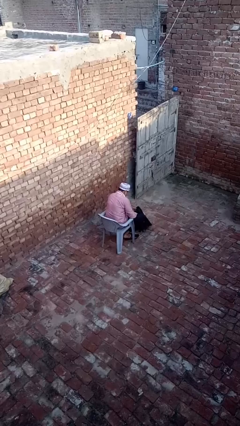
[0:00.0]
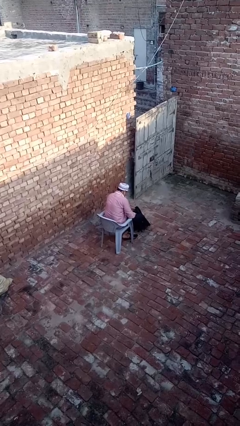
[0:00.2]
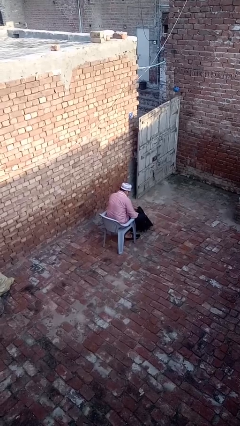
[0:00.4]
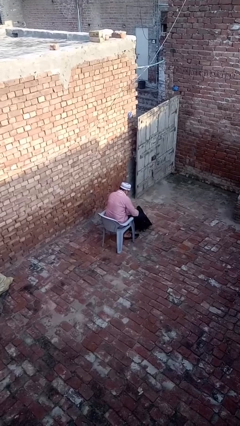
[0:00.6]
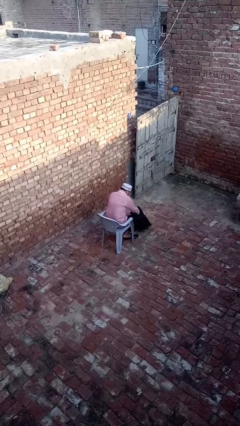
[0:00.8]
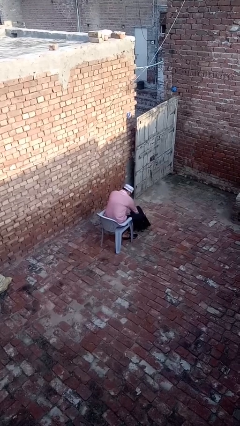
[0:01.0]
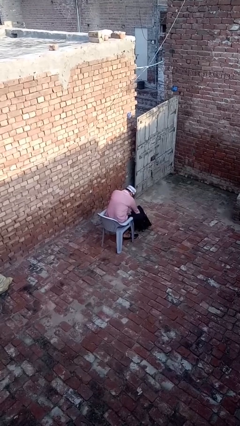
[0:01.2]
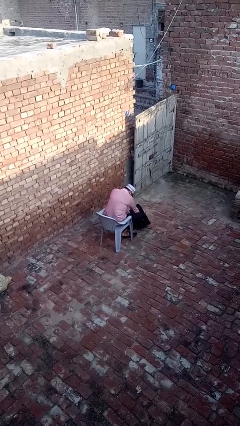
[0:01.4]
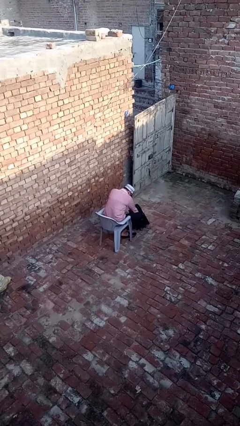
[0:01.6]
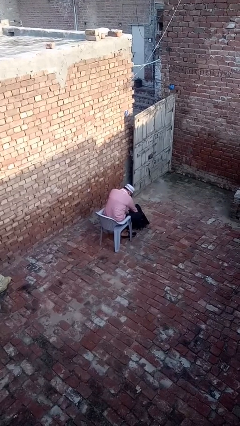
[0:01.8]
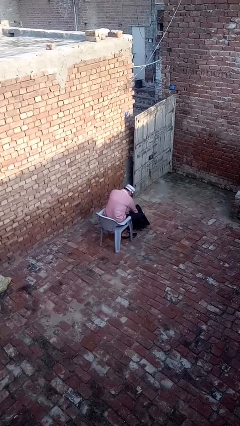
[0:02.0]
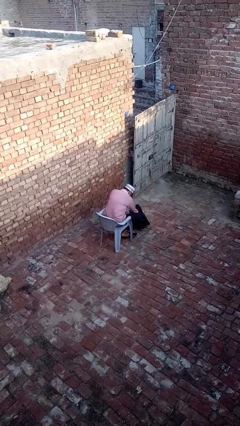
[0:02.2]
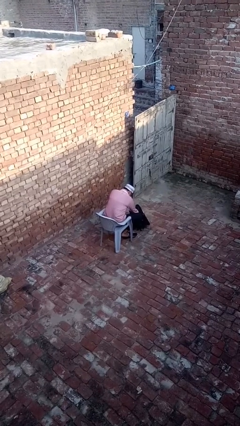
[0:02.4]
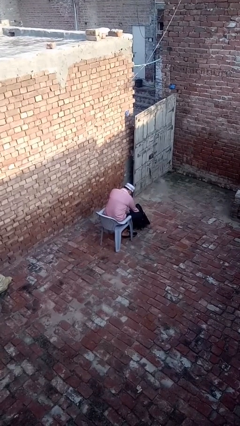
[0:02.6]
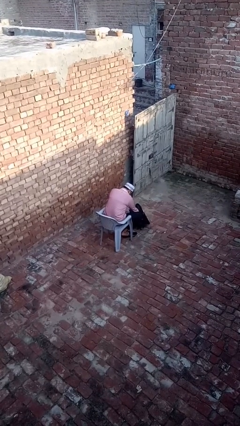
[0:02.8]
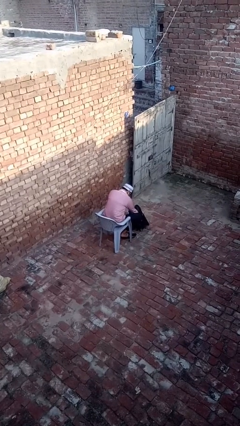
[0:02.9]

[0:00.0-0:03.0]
person searches in backpack

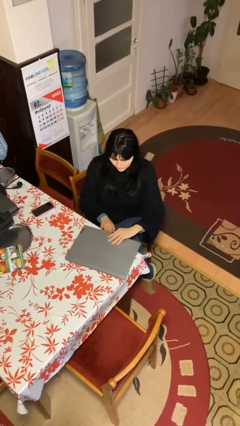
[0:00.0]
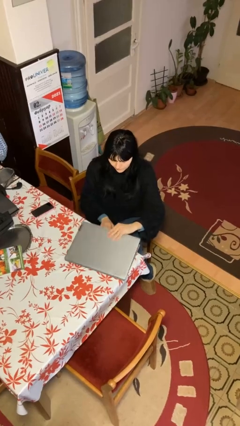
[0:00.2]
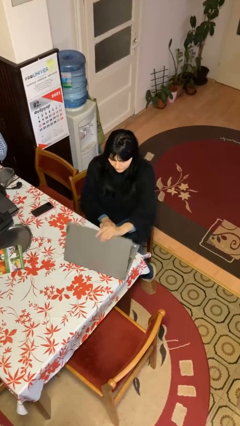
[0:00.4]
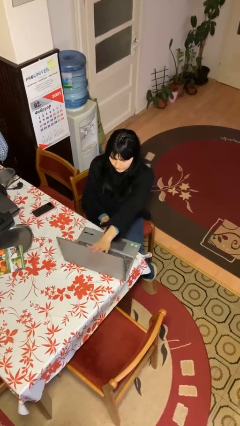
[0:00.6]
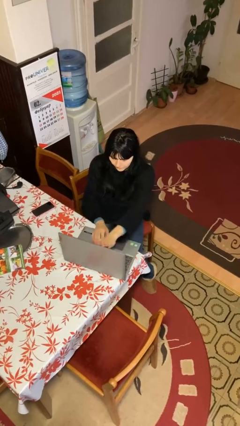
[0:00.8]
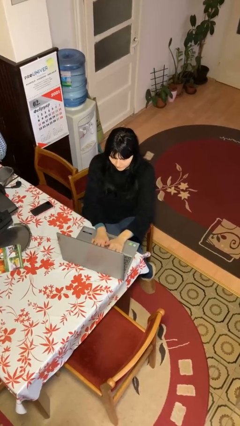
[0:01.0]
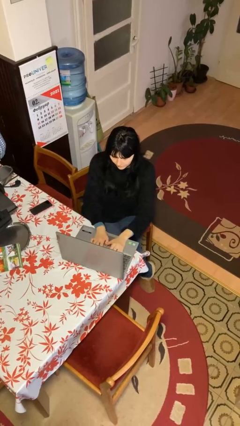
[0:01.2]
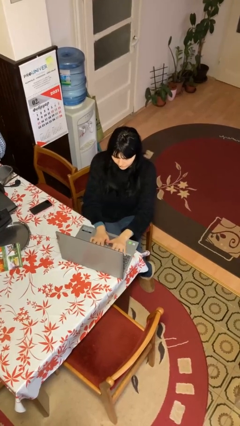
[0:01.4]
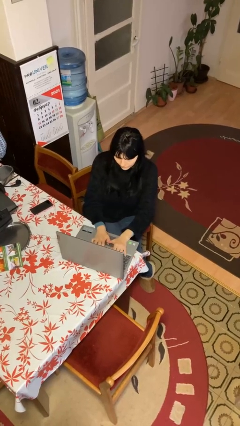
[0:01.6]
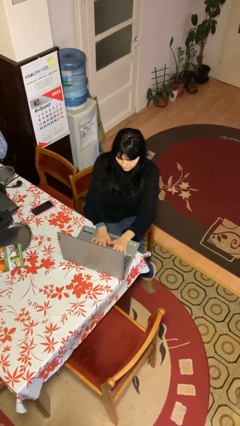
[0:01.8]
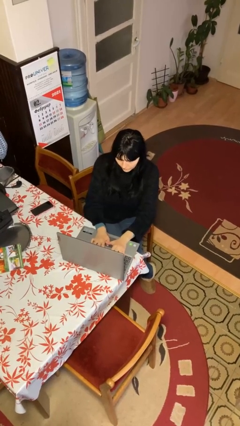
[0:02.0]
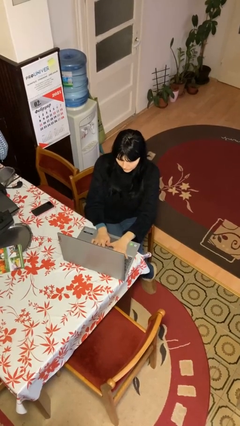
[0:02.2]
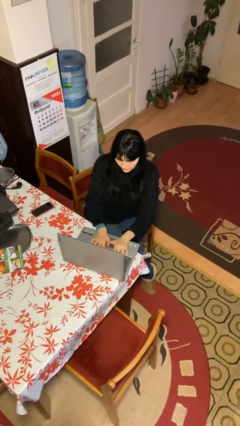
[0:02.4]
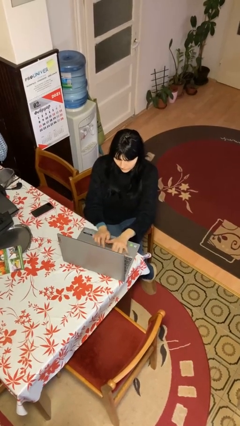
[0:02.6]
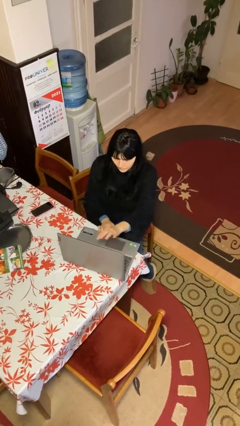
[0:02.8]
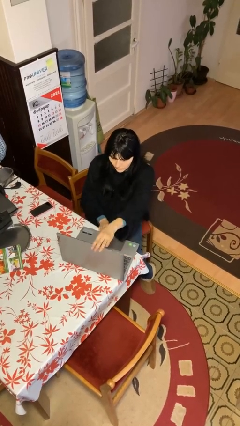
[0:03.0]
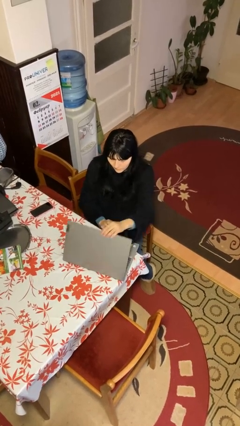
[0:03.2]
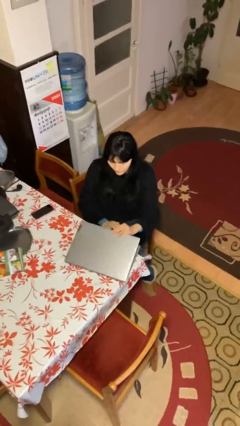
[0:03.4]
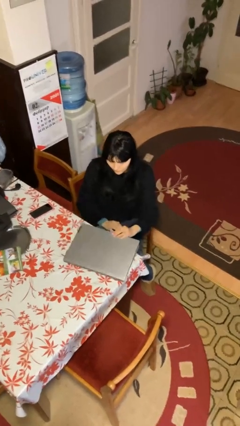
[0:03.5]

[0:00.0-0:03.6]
person interacts with laptop

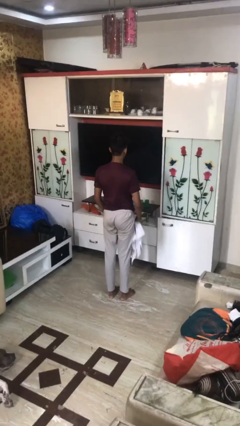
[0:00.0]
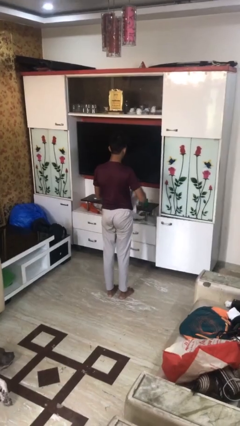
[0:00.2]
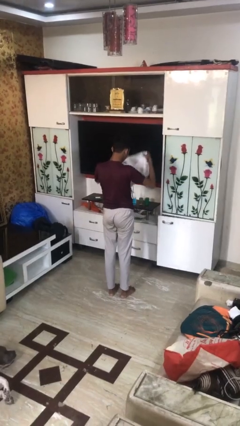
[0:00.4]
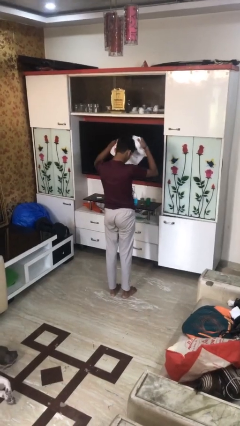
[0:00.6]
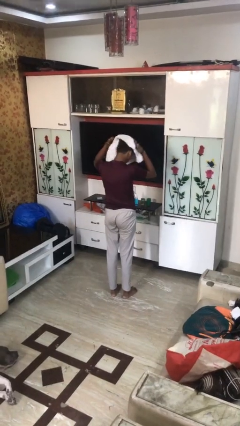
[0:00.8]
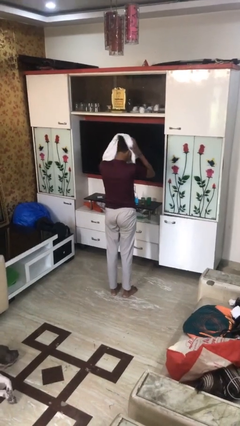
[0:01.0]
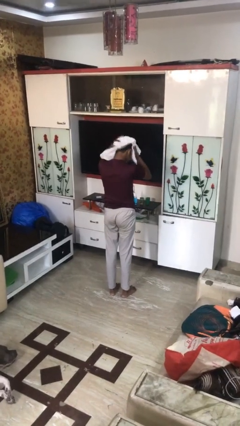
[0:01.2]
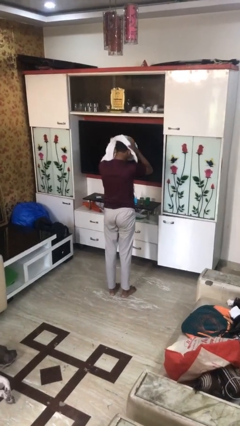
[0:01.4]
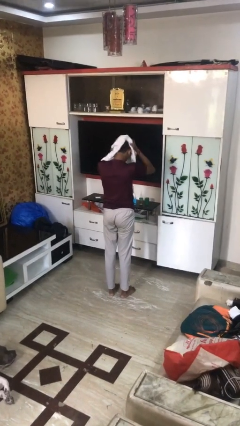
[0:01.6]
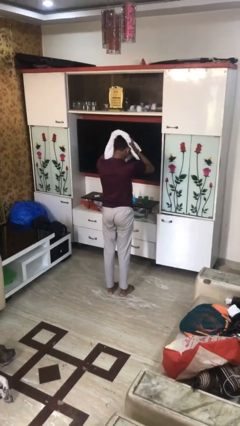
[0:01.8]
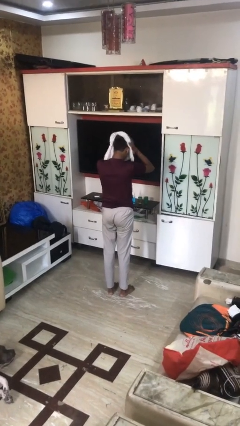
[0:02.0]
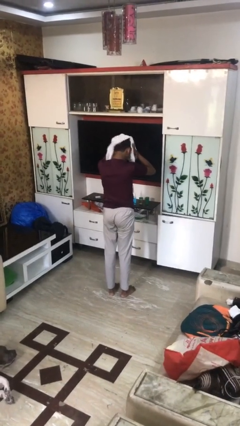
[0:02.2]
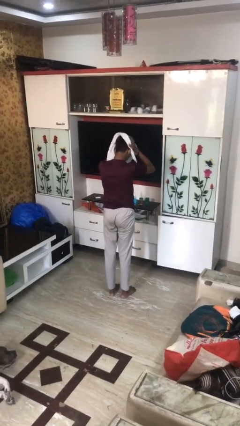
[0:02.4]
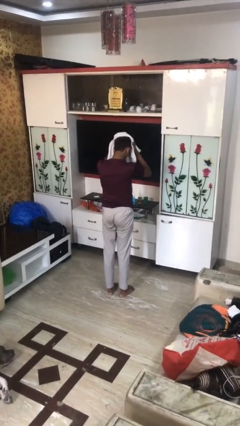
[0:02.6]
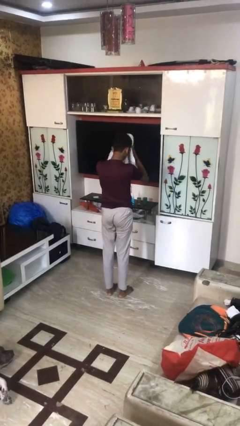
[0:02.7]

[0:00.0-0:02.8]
person dries hair with towel

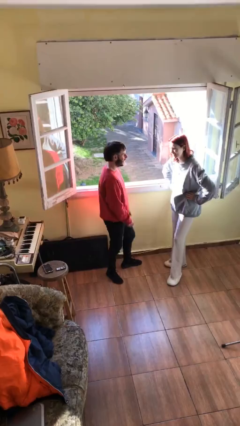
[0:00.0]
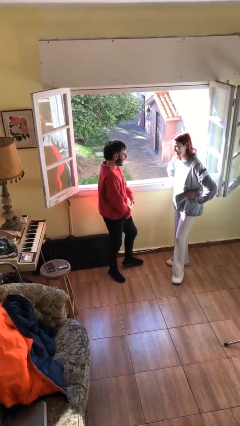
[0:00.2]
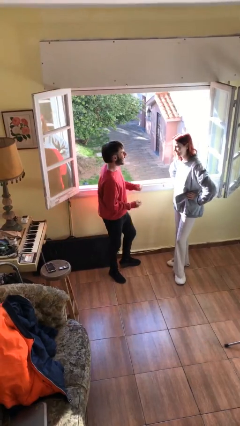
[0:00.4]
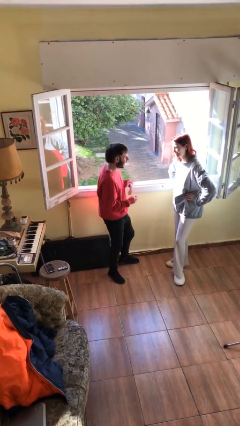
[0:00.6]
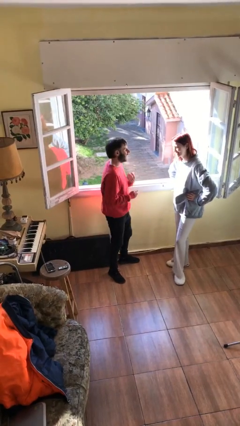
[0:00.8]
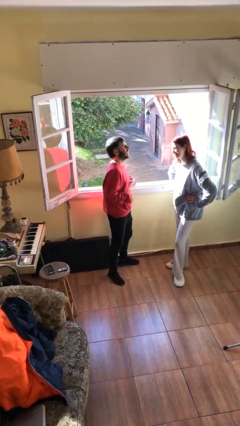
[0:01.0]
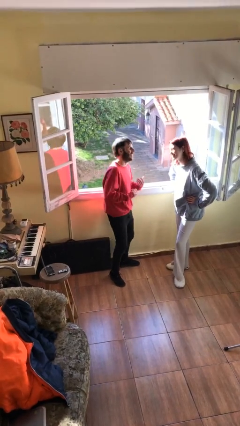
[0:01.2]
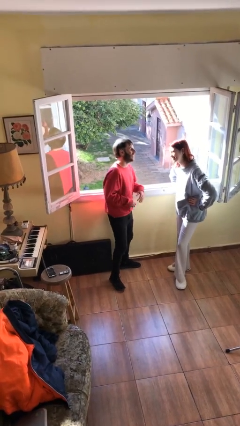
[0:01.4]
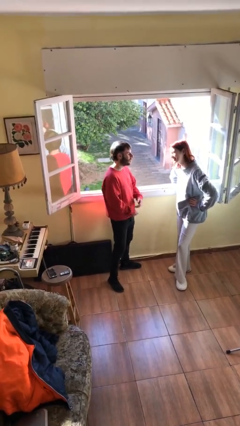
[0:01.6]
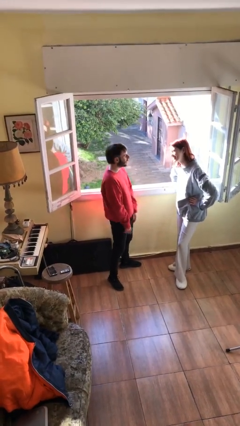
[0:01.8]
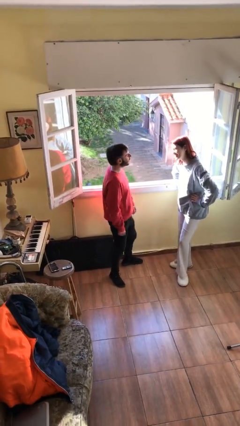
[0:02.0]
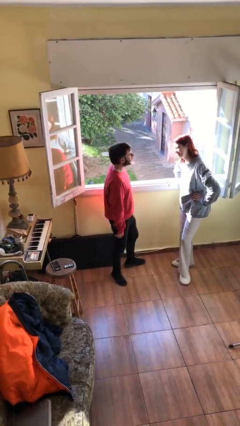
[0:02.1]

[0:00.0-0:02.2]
person laughs with person

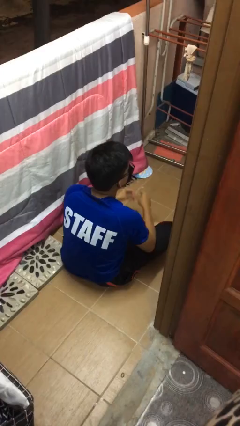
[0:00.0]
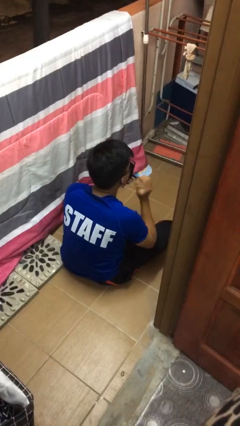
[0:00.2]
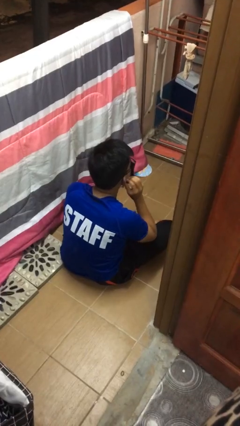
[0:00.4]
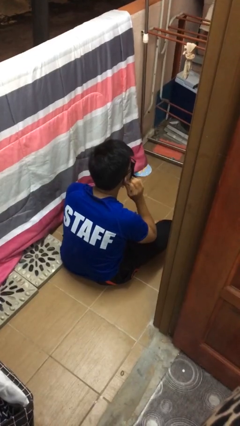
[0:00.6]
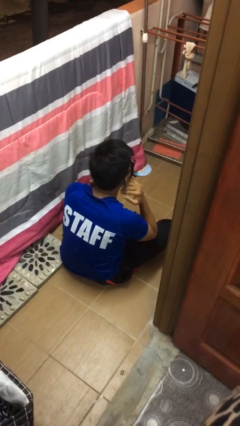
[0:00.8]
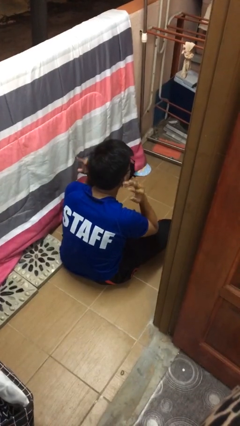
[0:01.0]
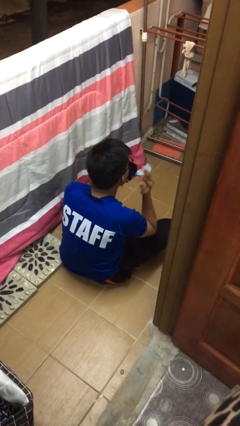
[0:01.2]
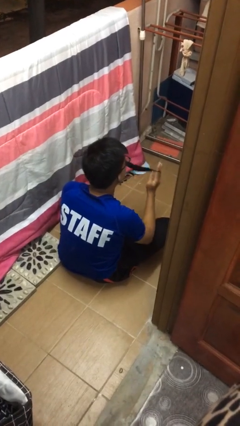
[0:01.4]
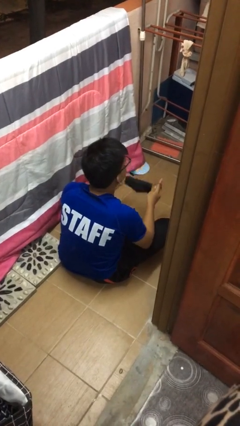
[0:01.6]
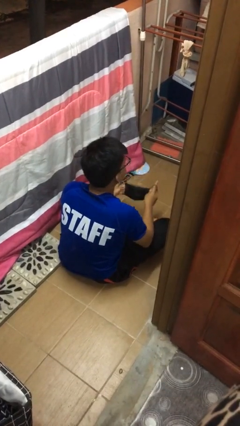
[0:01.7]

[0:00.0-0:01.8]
person takes off facemask

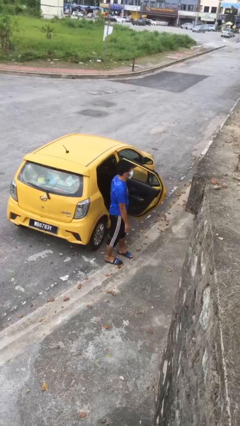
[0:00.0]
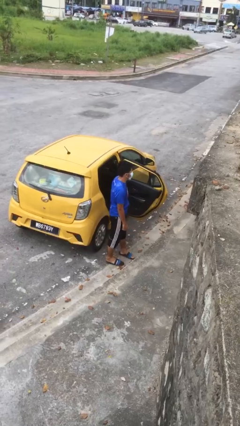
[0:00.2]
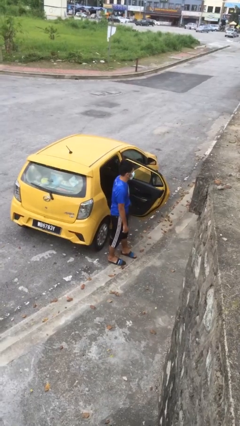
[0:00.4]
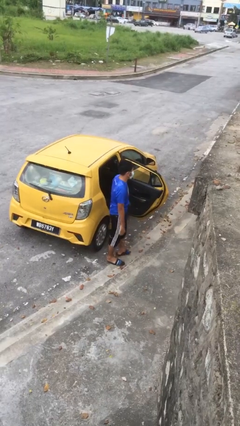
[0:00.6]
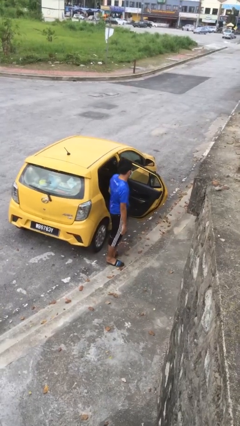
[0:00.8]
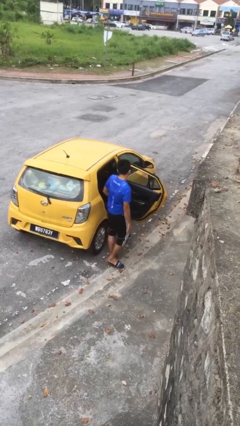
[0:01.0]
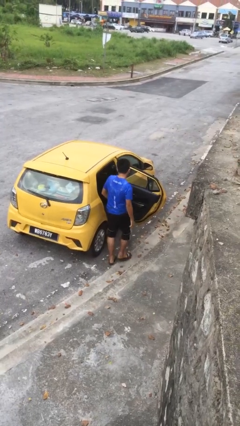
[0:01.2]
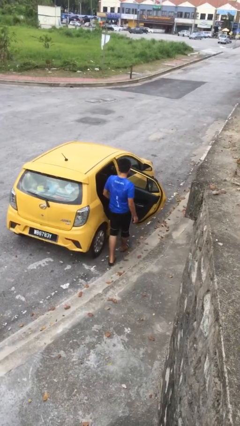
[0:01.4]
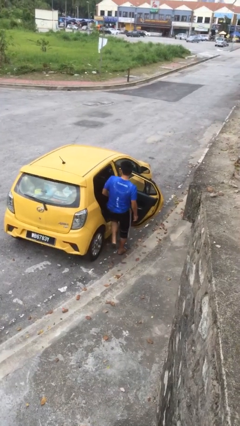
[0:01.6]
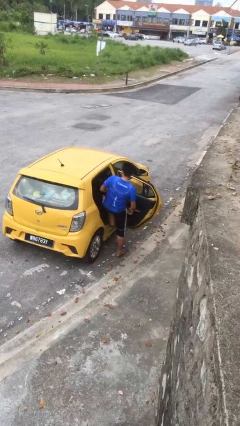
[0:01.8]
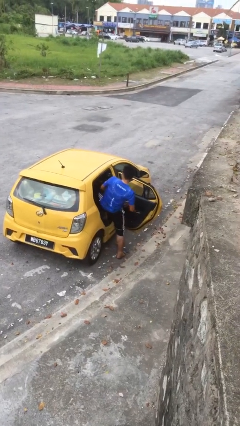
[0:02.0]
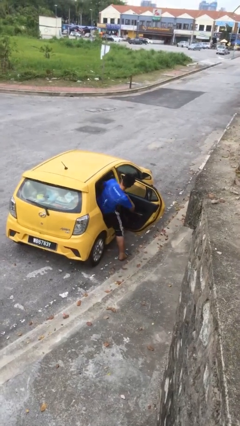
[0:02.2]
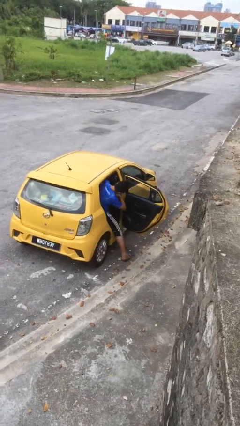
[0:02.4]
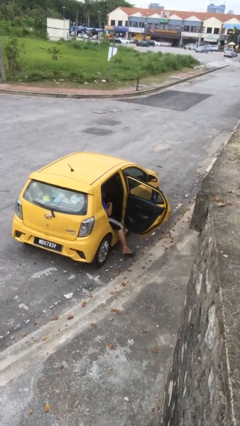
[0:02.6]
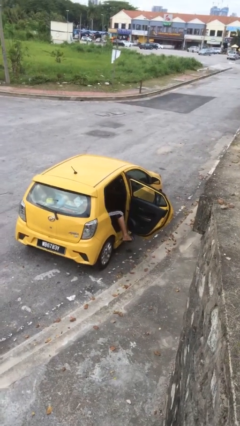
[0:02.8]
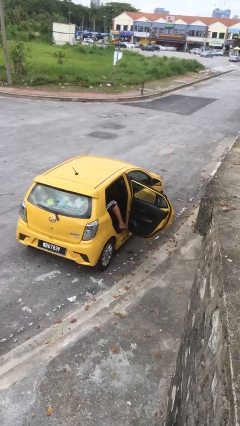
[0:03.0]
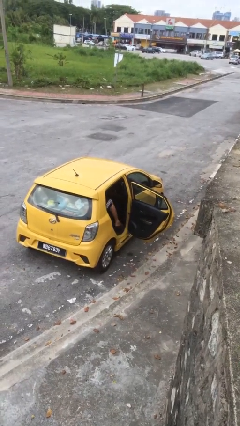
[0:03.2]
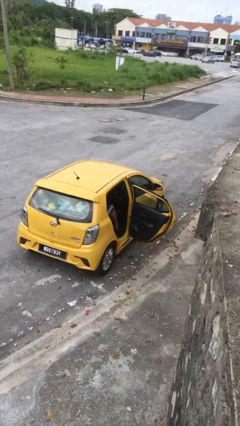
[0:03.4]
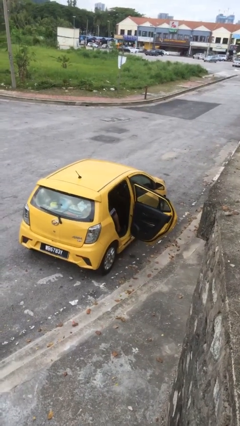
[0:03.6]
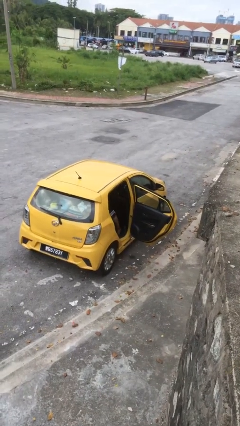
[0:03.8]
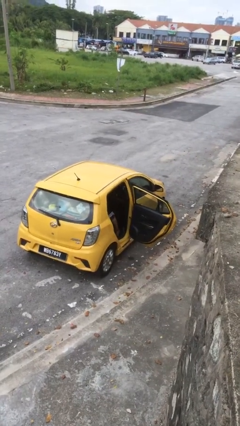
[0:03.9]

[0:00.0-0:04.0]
person enters car
